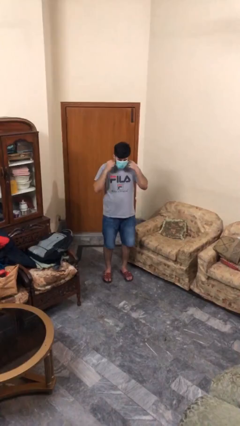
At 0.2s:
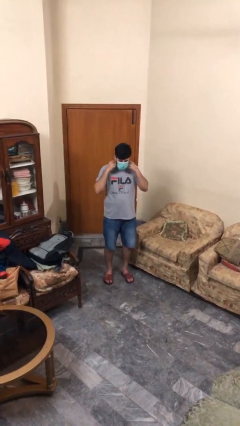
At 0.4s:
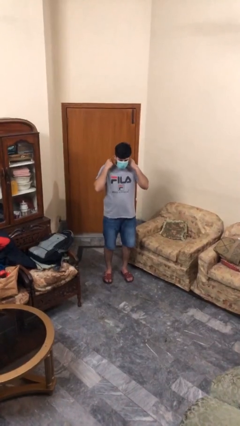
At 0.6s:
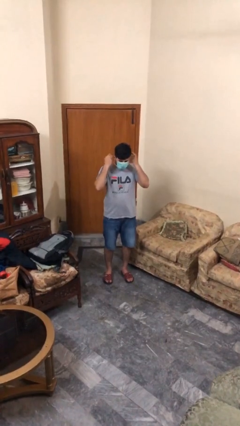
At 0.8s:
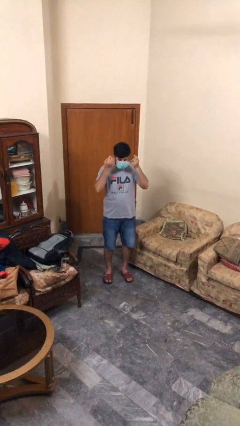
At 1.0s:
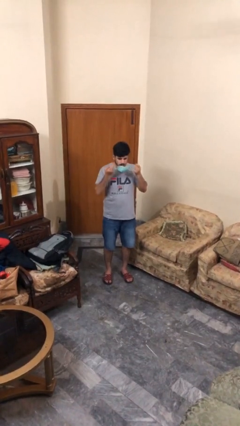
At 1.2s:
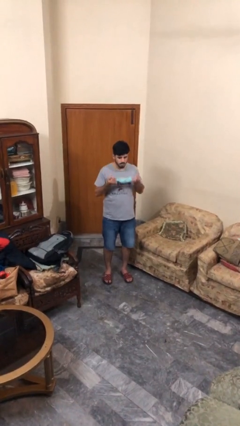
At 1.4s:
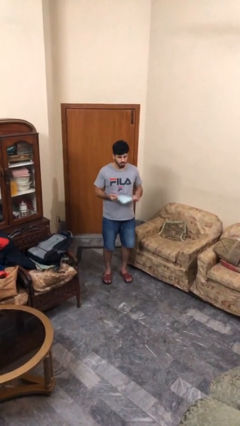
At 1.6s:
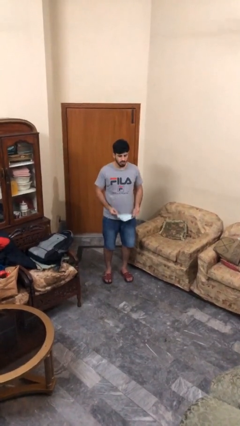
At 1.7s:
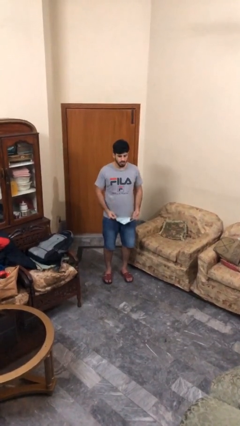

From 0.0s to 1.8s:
person takes off facemask

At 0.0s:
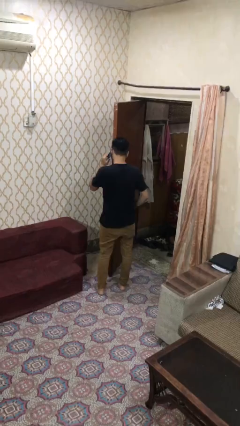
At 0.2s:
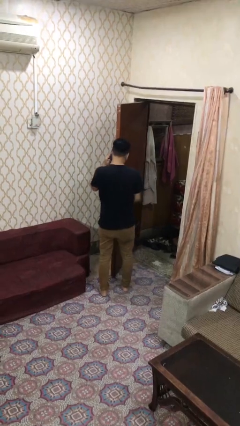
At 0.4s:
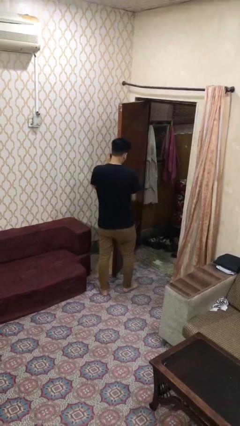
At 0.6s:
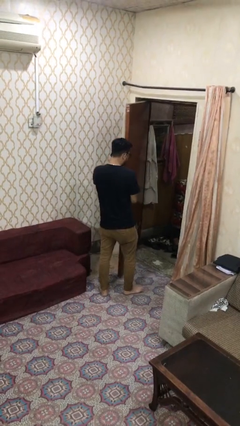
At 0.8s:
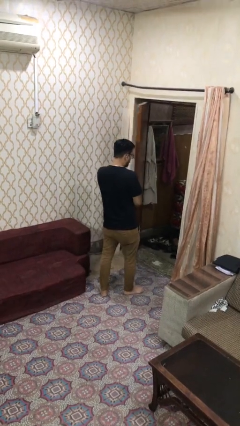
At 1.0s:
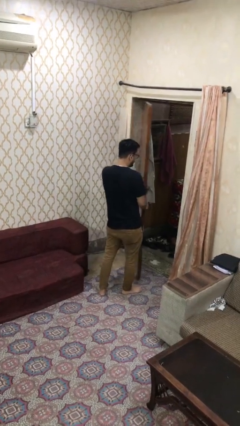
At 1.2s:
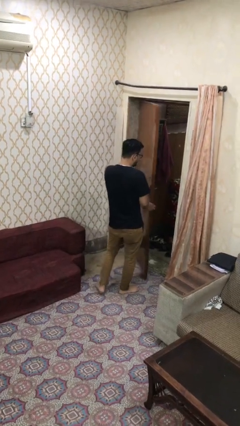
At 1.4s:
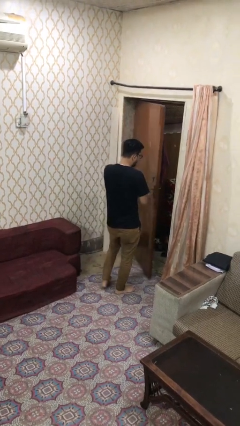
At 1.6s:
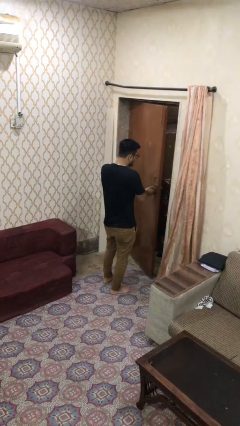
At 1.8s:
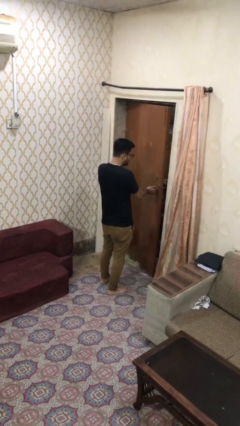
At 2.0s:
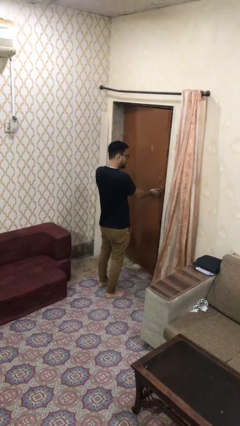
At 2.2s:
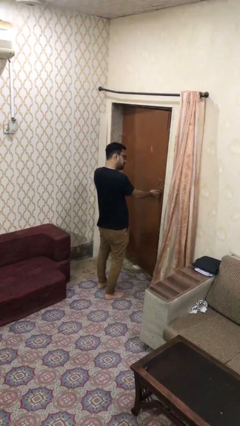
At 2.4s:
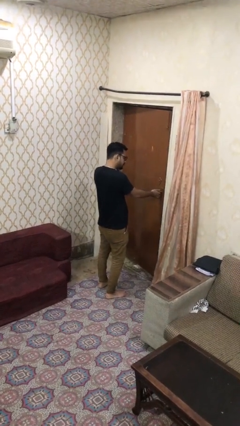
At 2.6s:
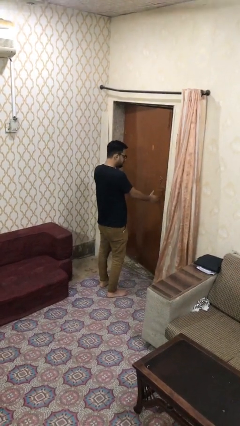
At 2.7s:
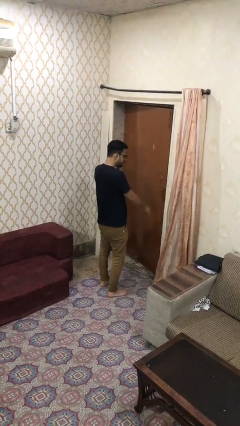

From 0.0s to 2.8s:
person closes facility door

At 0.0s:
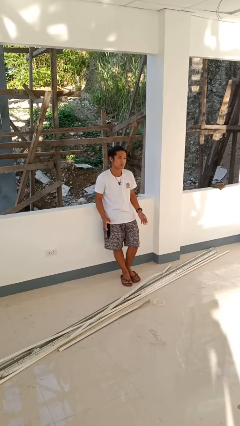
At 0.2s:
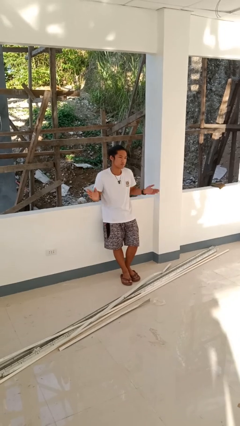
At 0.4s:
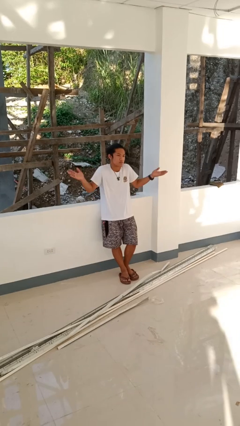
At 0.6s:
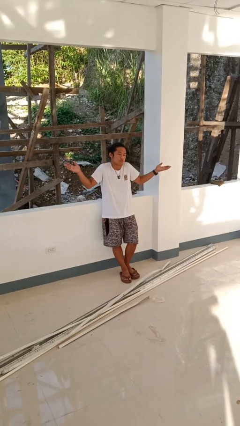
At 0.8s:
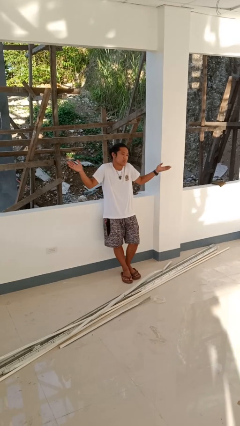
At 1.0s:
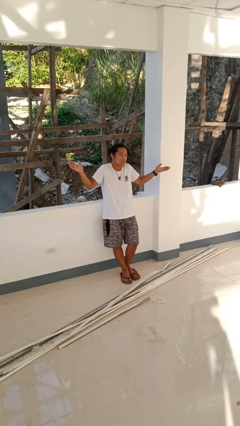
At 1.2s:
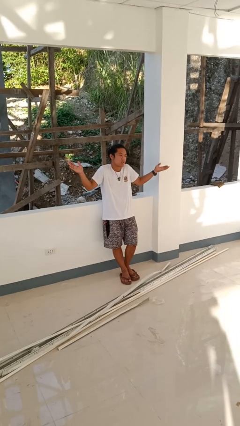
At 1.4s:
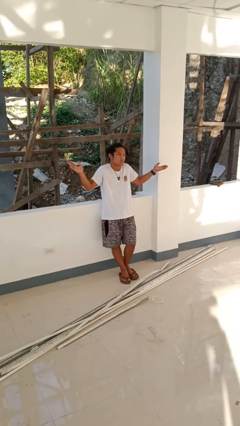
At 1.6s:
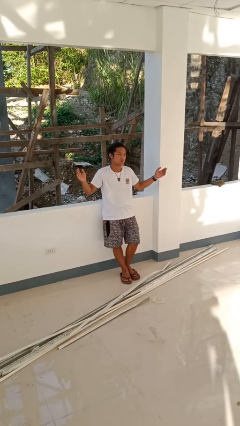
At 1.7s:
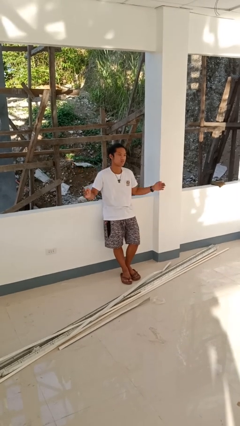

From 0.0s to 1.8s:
person shrugs

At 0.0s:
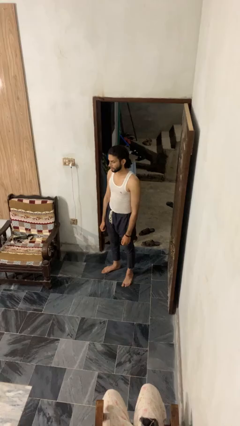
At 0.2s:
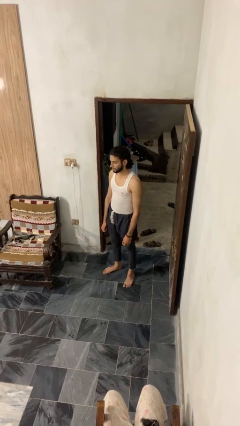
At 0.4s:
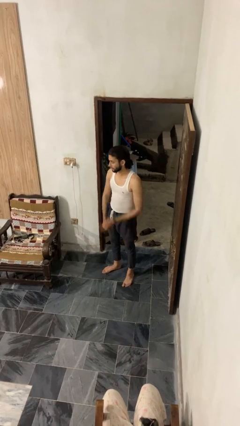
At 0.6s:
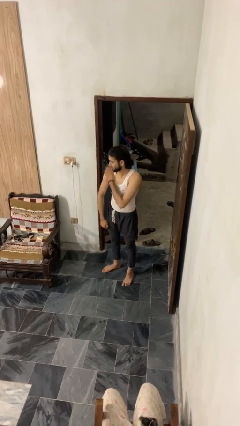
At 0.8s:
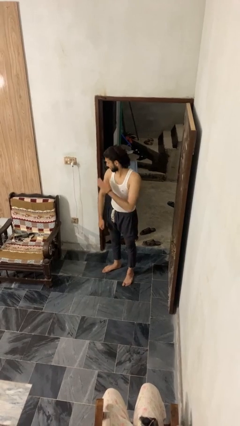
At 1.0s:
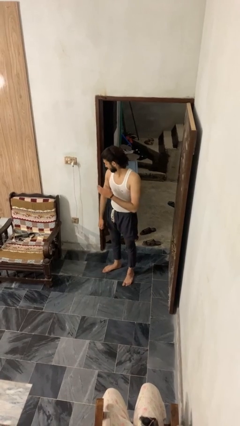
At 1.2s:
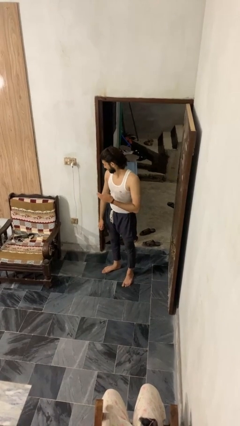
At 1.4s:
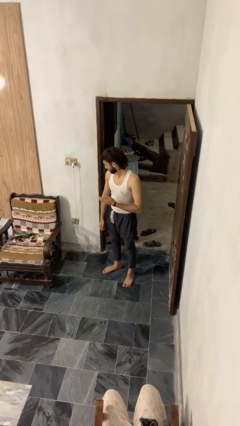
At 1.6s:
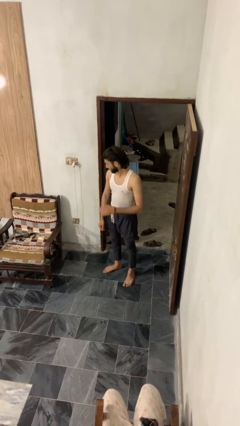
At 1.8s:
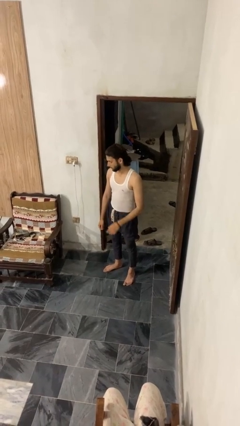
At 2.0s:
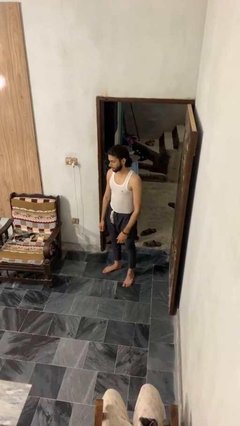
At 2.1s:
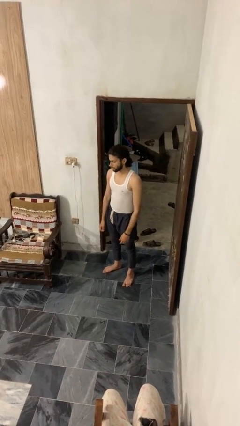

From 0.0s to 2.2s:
person swats bug

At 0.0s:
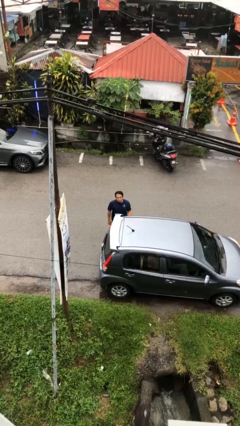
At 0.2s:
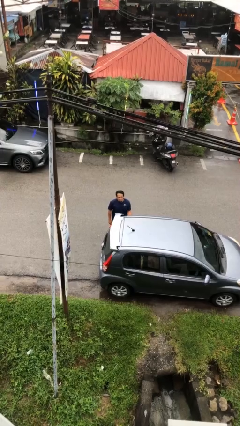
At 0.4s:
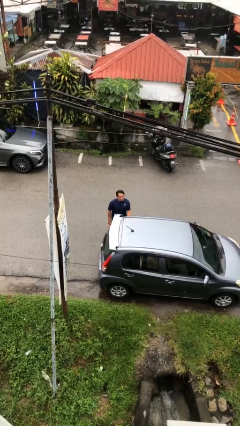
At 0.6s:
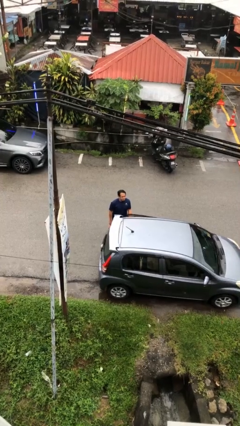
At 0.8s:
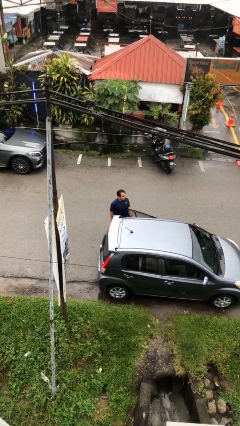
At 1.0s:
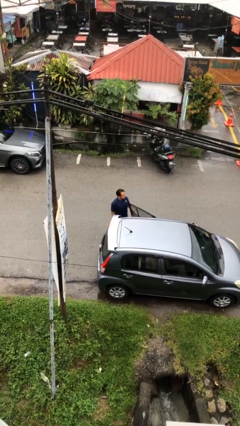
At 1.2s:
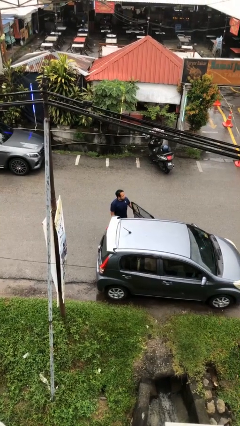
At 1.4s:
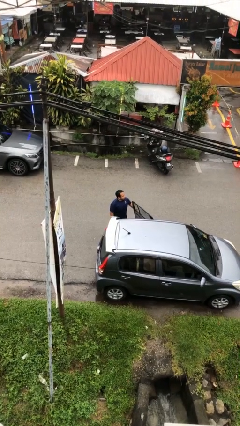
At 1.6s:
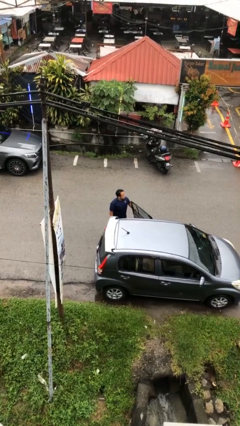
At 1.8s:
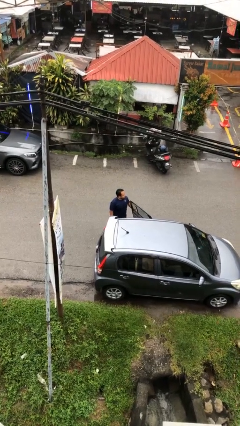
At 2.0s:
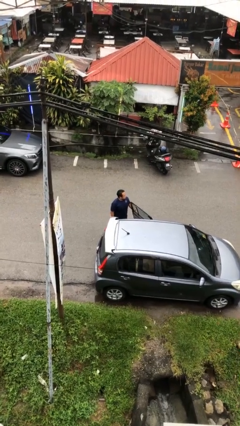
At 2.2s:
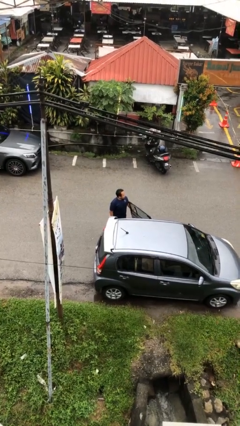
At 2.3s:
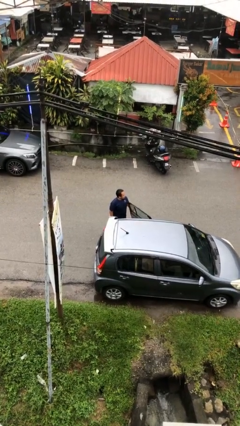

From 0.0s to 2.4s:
person opens car door

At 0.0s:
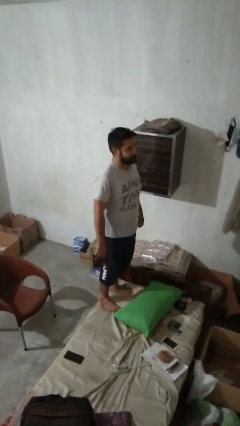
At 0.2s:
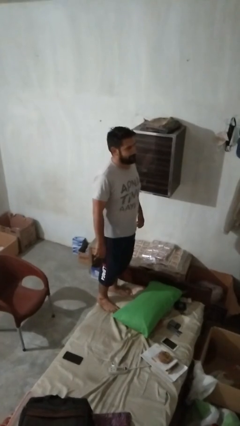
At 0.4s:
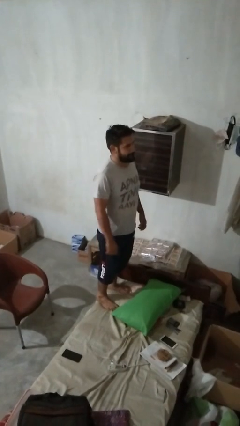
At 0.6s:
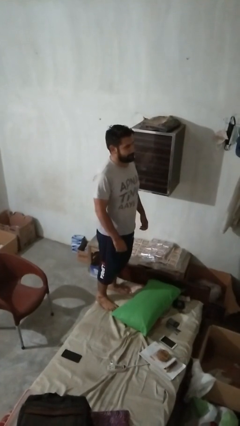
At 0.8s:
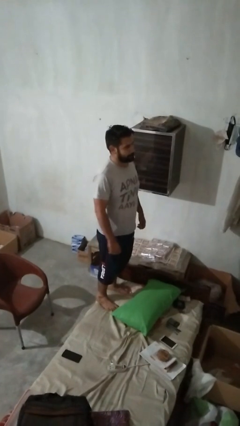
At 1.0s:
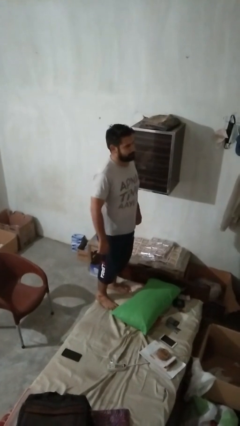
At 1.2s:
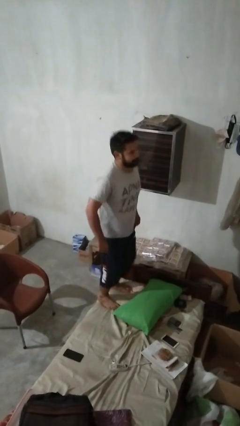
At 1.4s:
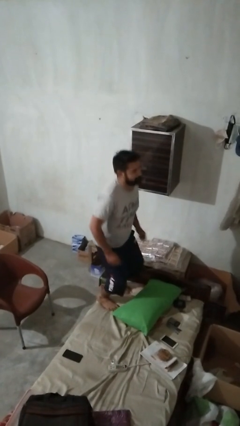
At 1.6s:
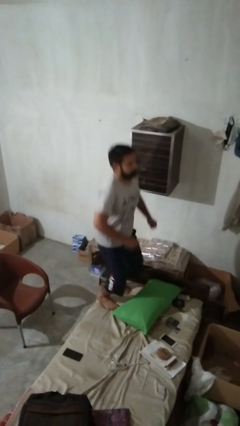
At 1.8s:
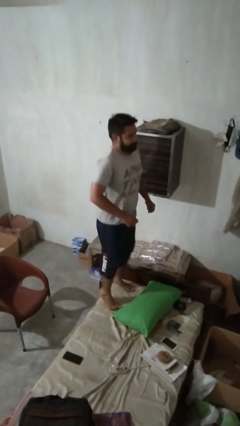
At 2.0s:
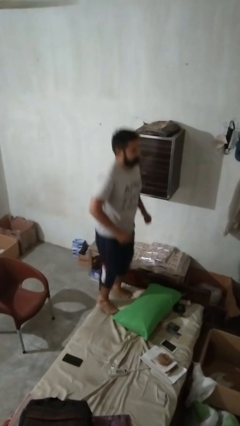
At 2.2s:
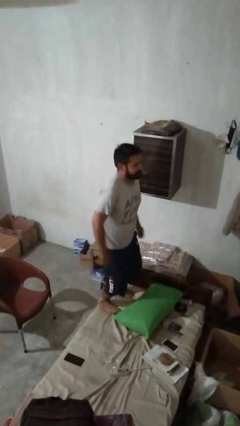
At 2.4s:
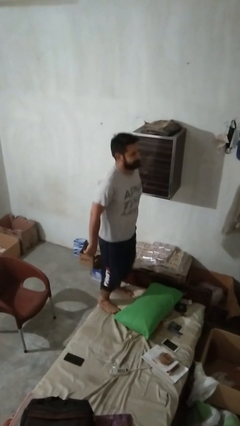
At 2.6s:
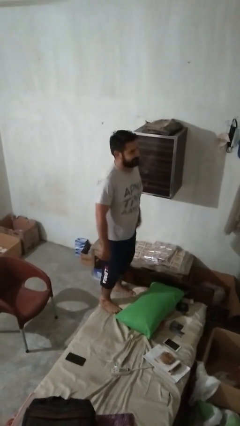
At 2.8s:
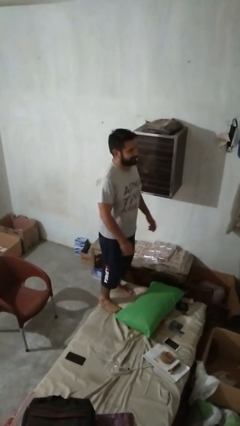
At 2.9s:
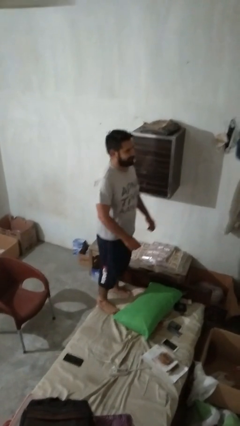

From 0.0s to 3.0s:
person jumps on couch

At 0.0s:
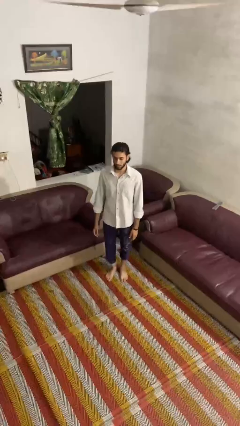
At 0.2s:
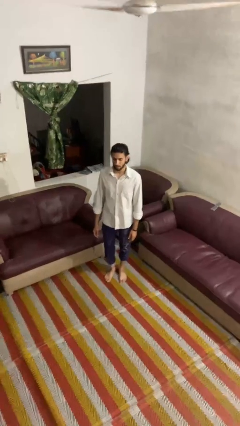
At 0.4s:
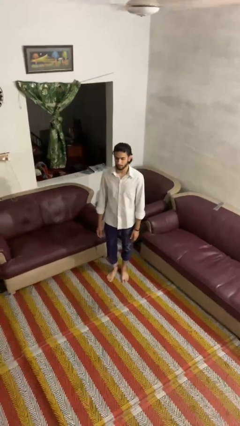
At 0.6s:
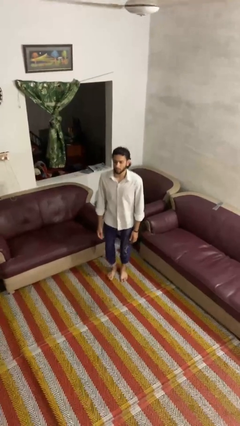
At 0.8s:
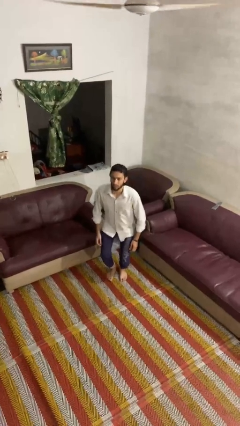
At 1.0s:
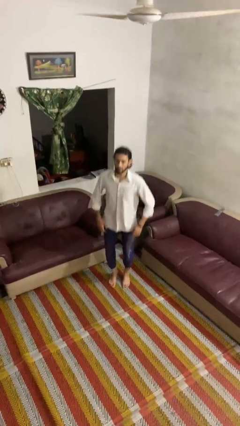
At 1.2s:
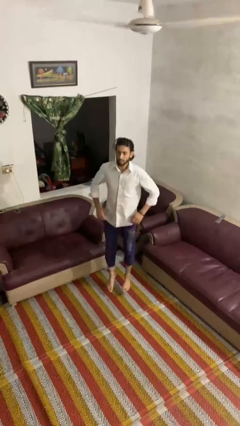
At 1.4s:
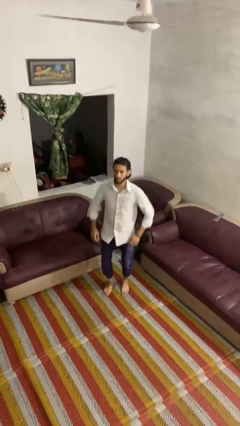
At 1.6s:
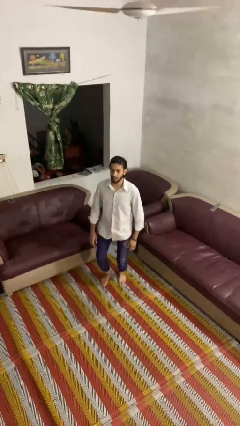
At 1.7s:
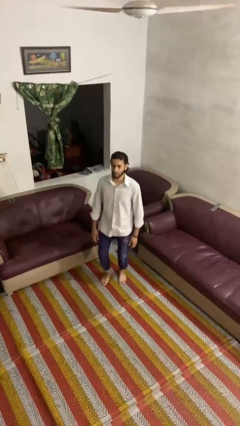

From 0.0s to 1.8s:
person jumps

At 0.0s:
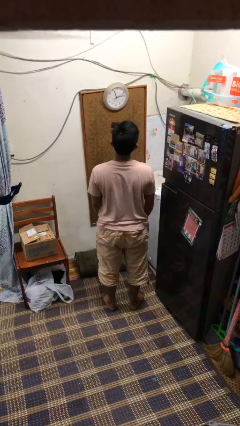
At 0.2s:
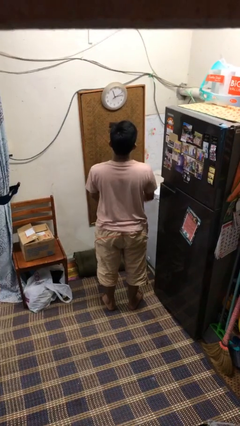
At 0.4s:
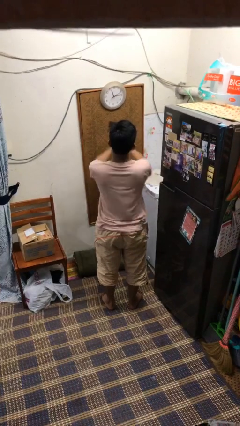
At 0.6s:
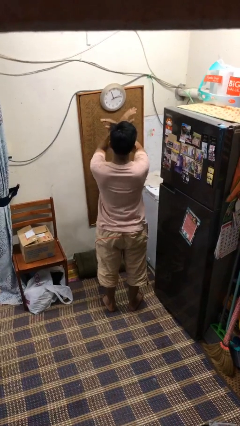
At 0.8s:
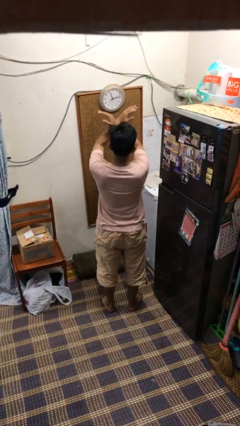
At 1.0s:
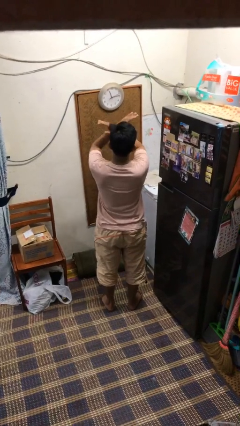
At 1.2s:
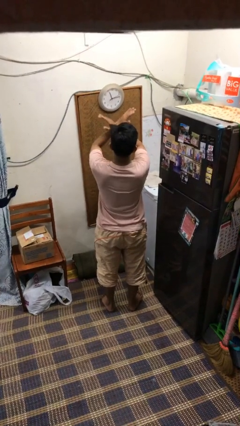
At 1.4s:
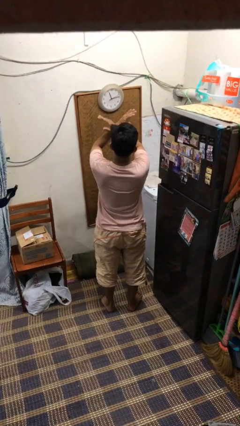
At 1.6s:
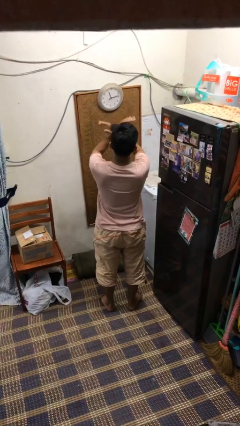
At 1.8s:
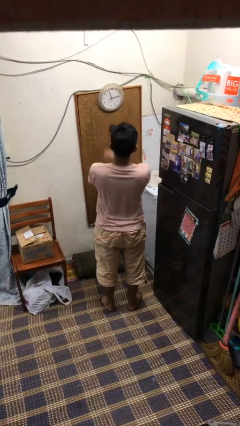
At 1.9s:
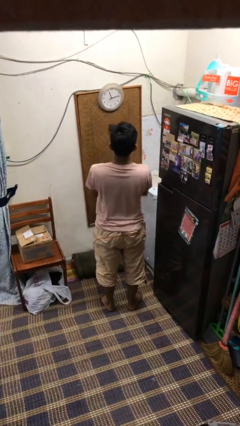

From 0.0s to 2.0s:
person gestures arms x
